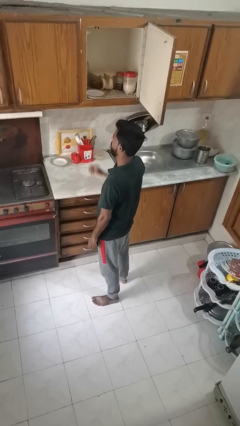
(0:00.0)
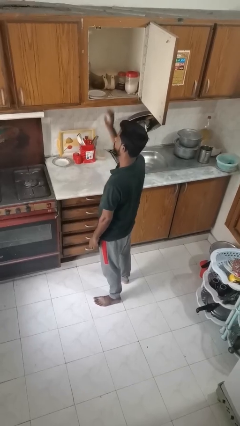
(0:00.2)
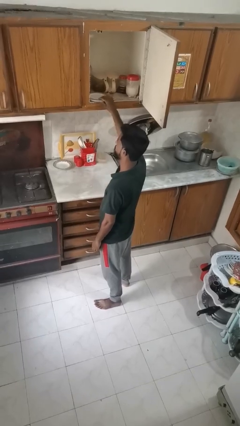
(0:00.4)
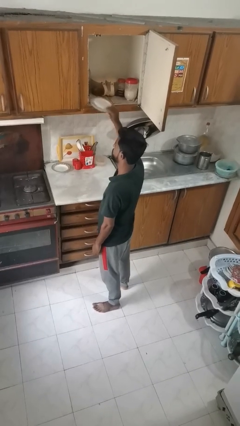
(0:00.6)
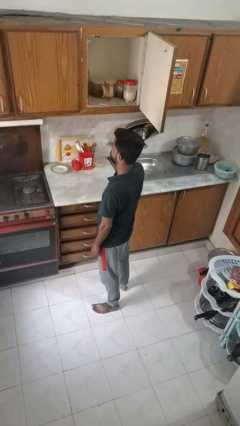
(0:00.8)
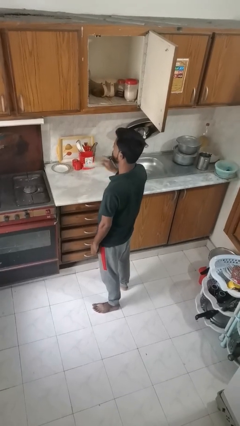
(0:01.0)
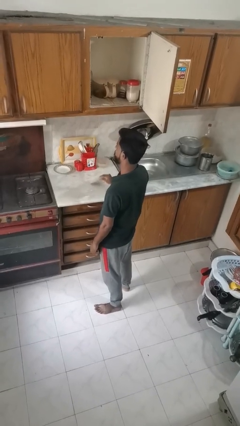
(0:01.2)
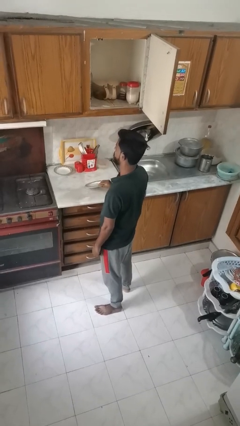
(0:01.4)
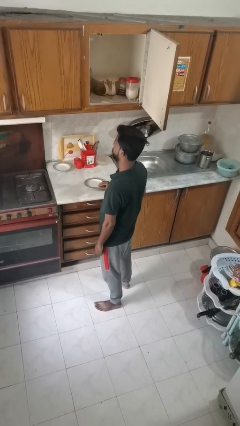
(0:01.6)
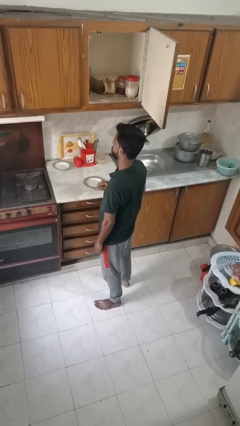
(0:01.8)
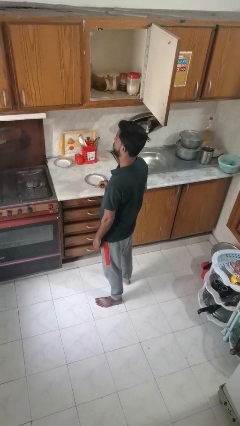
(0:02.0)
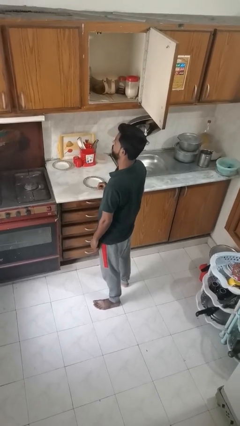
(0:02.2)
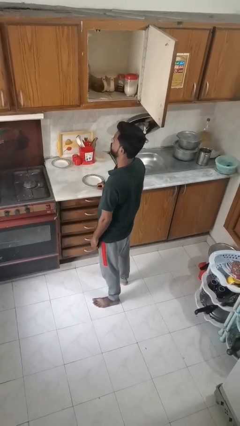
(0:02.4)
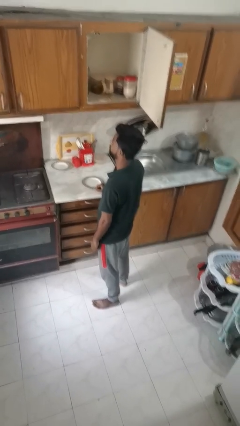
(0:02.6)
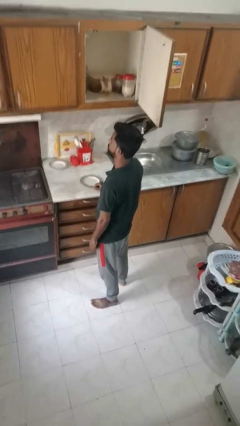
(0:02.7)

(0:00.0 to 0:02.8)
person takes object from cabinet

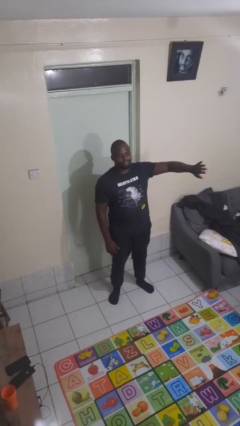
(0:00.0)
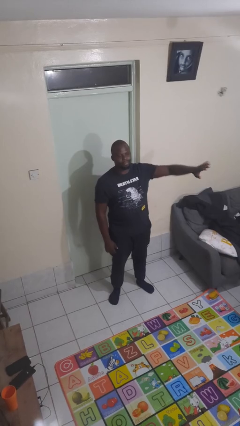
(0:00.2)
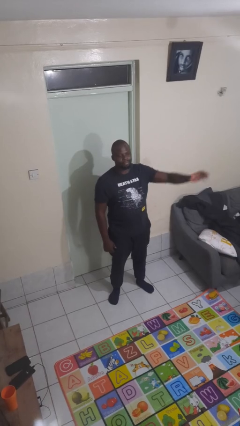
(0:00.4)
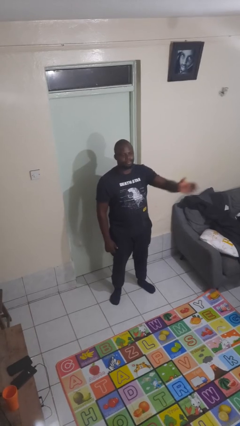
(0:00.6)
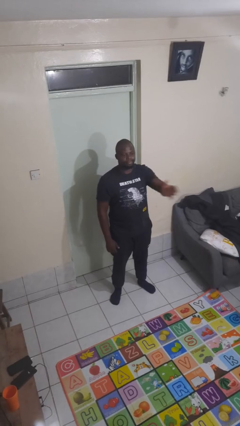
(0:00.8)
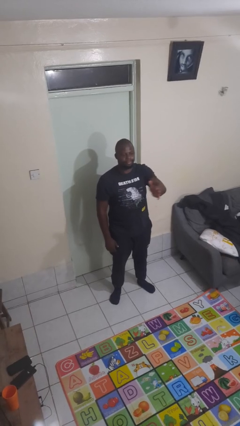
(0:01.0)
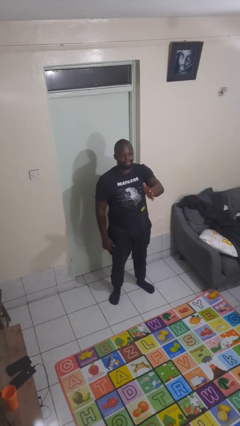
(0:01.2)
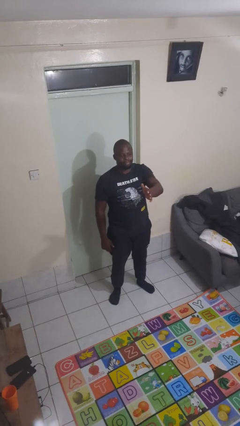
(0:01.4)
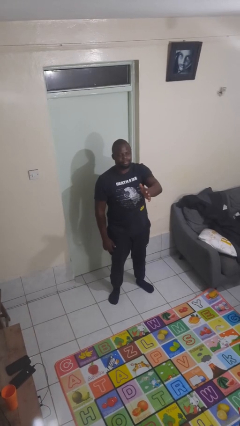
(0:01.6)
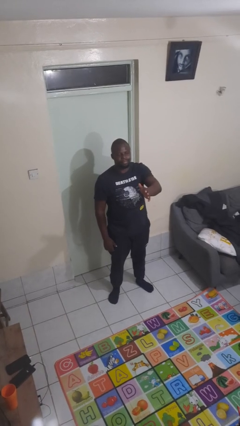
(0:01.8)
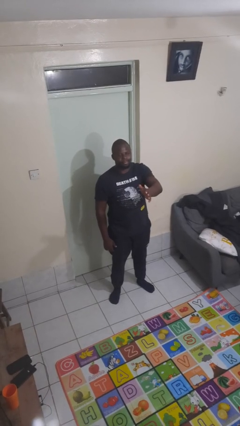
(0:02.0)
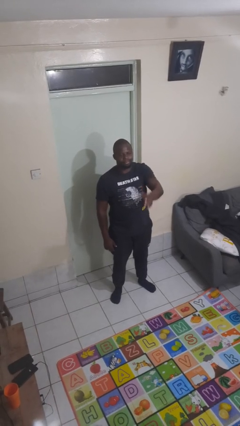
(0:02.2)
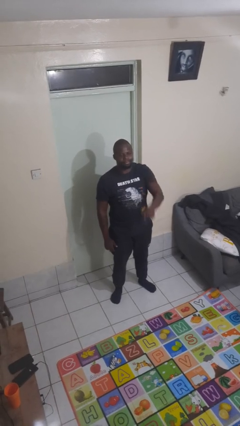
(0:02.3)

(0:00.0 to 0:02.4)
person gestures swipe right

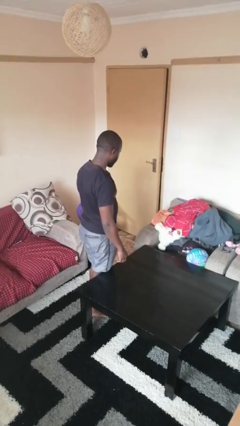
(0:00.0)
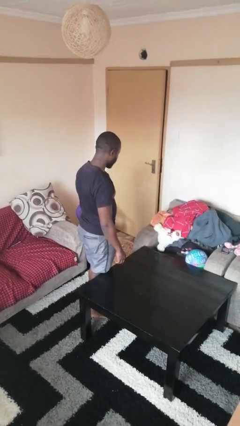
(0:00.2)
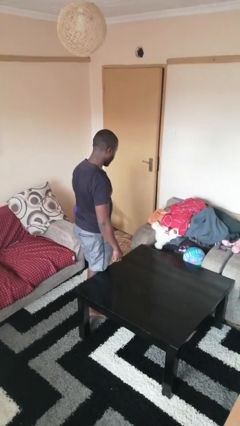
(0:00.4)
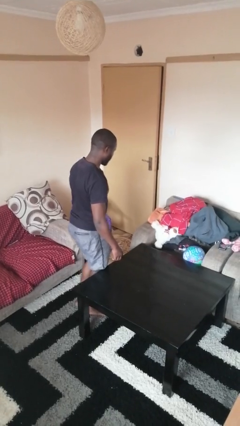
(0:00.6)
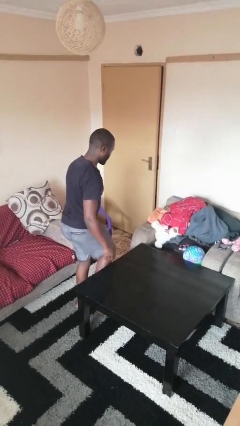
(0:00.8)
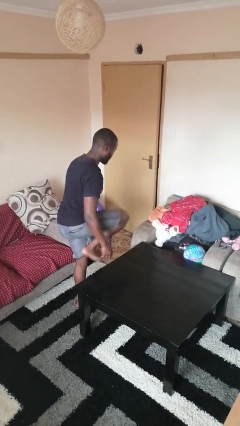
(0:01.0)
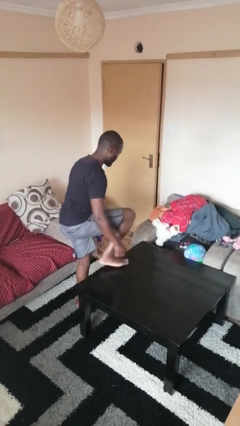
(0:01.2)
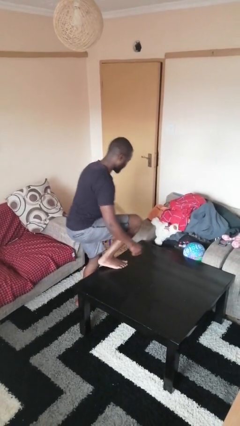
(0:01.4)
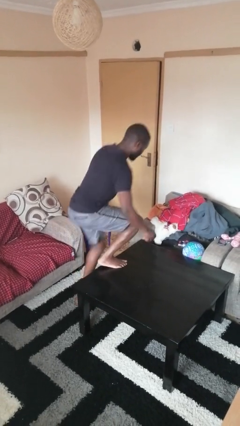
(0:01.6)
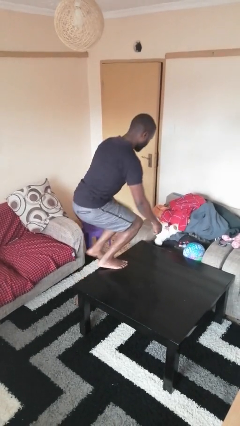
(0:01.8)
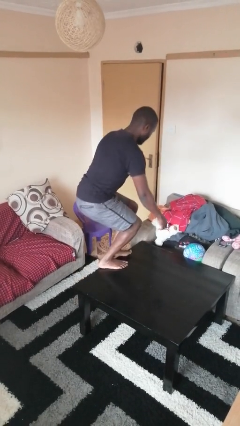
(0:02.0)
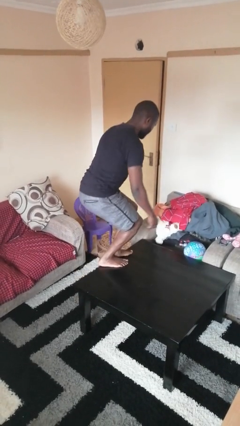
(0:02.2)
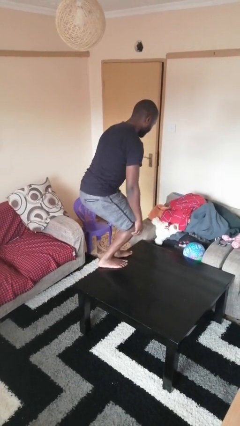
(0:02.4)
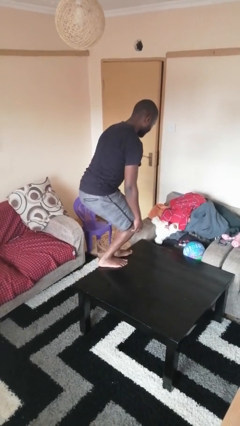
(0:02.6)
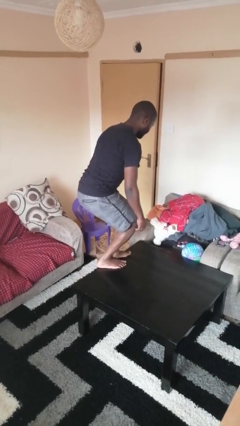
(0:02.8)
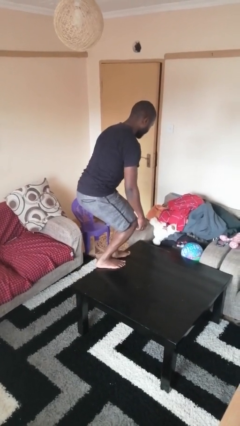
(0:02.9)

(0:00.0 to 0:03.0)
person climbs on table

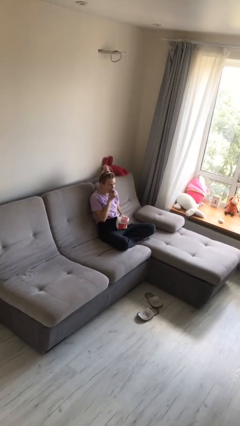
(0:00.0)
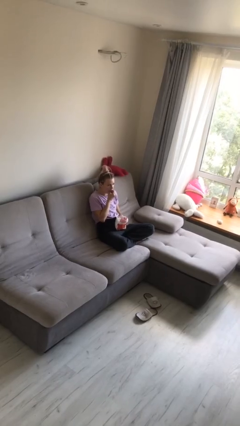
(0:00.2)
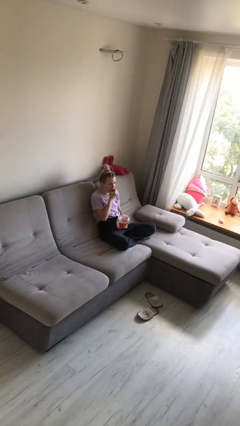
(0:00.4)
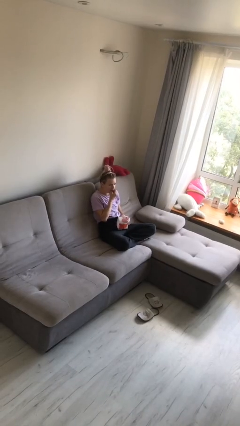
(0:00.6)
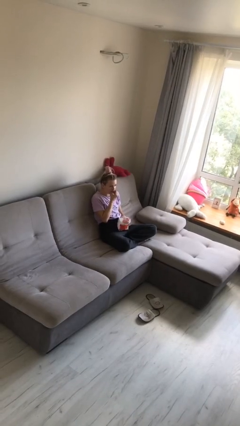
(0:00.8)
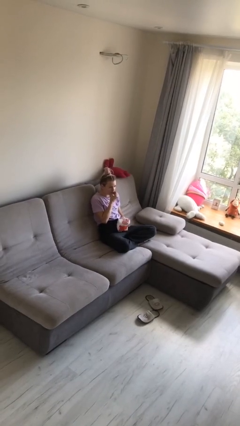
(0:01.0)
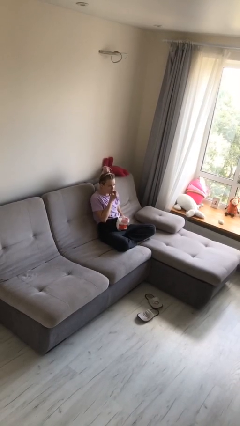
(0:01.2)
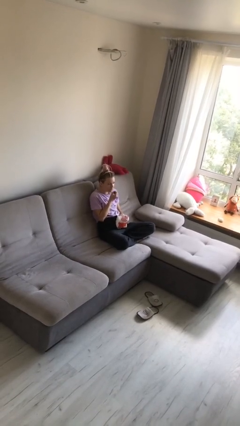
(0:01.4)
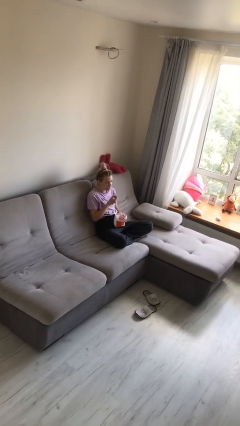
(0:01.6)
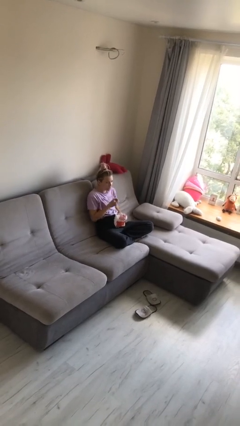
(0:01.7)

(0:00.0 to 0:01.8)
person eats snack from bag

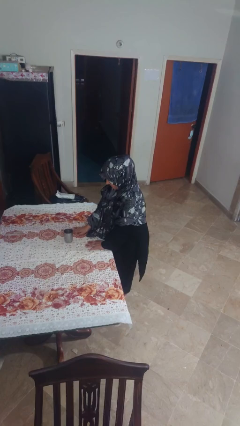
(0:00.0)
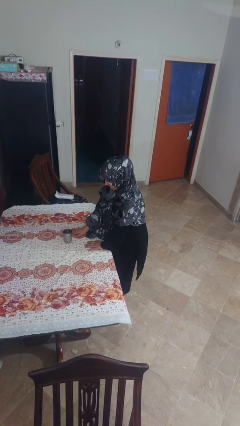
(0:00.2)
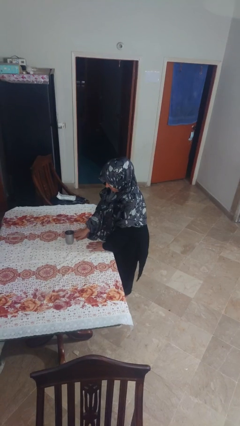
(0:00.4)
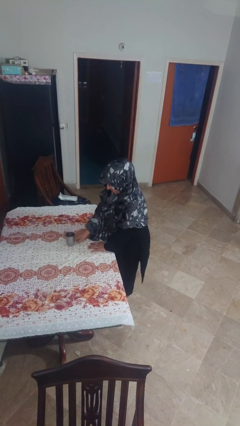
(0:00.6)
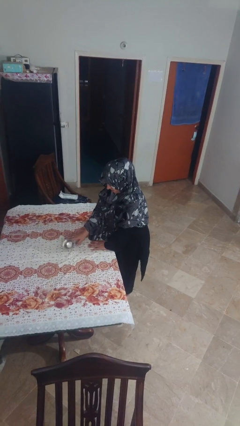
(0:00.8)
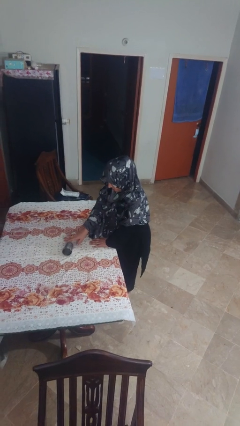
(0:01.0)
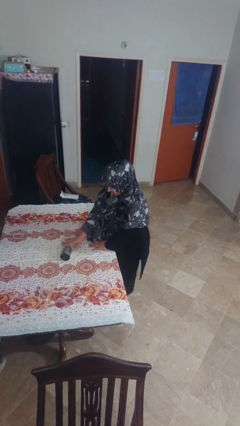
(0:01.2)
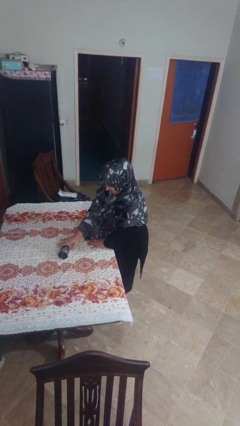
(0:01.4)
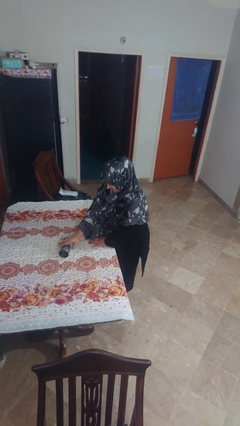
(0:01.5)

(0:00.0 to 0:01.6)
person knocks over glass

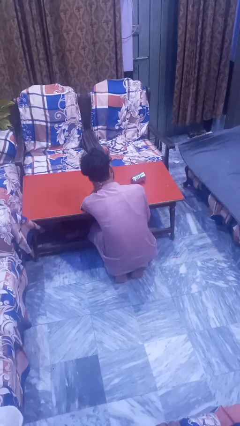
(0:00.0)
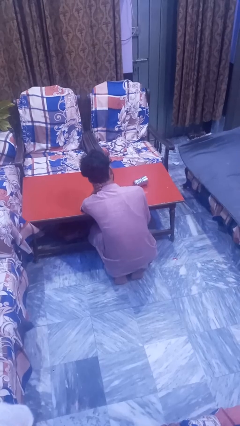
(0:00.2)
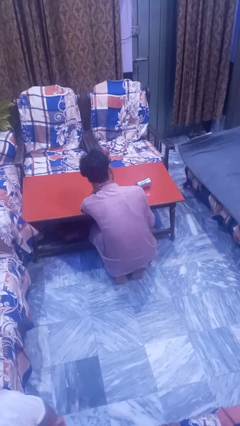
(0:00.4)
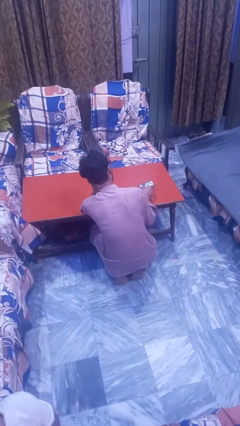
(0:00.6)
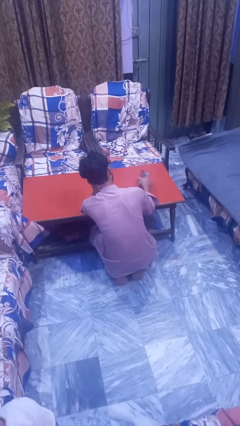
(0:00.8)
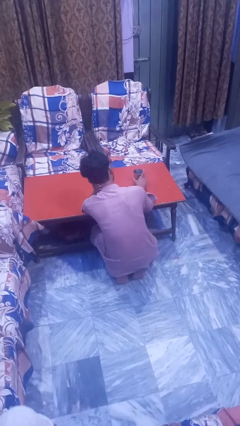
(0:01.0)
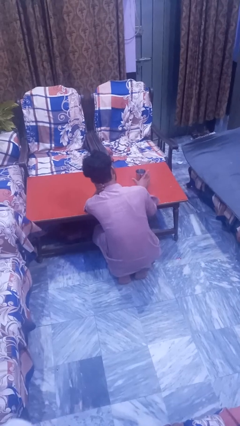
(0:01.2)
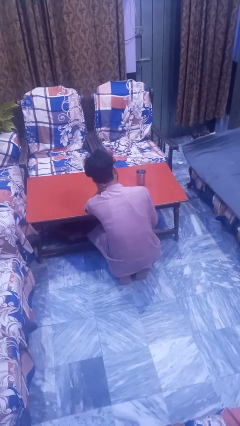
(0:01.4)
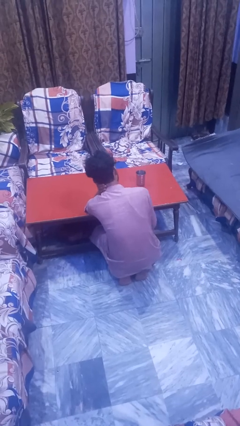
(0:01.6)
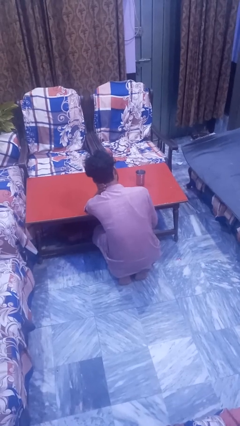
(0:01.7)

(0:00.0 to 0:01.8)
person sets upright glass

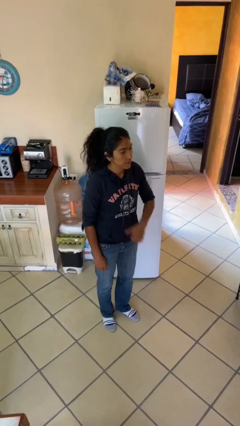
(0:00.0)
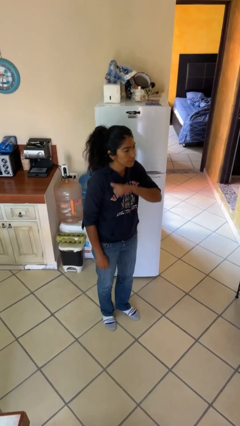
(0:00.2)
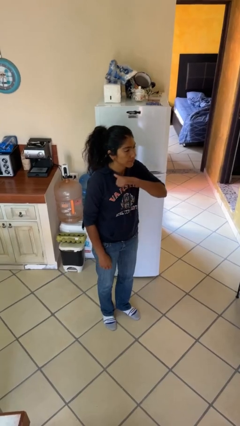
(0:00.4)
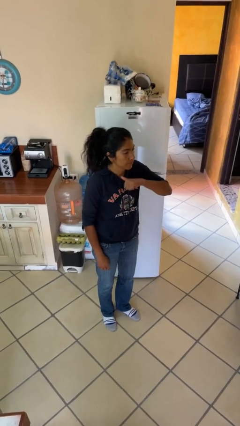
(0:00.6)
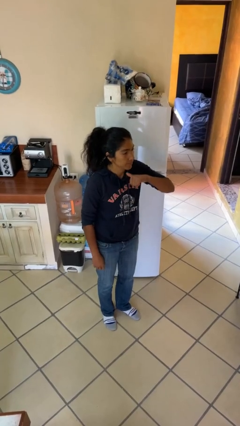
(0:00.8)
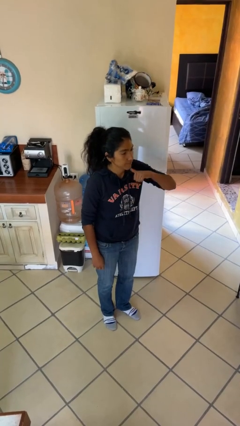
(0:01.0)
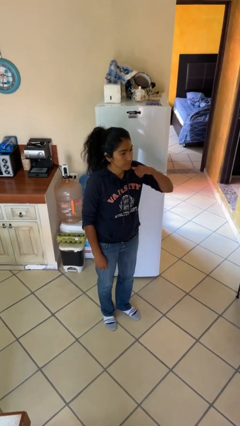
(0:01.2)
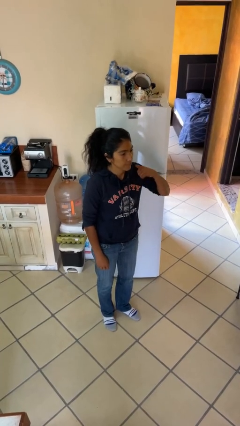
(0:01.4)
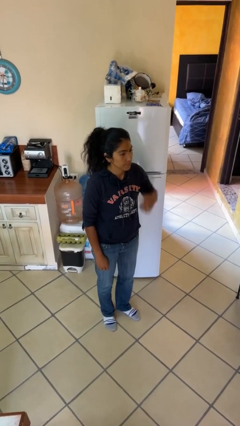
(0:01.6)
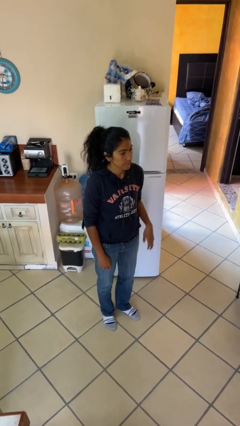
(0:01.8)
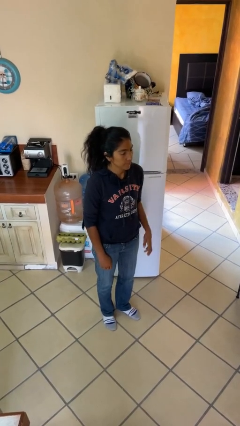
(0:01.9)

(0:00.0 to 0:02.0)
person gestures cut

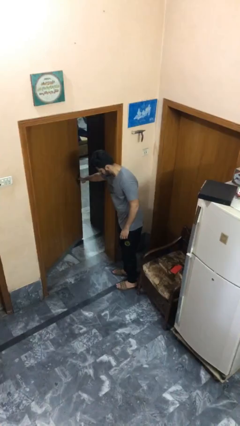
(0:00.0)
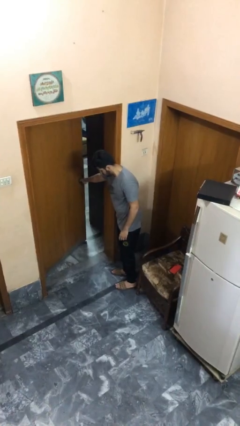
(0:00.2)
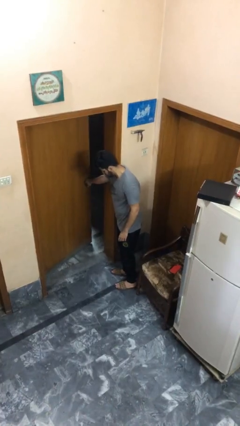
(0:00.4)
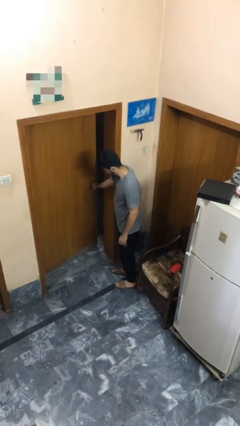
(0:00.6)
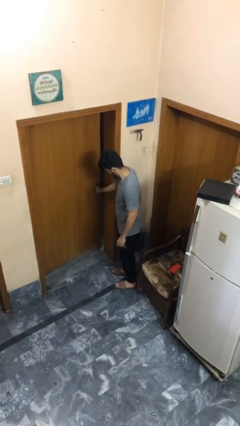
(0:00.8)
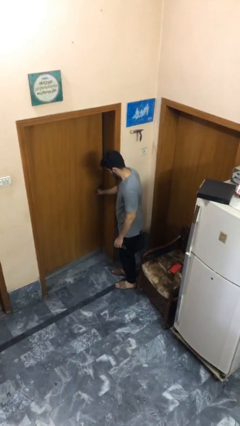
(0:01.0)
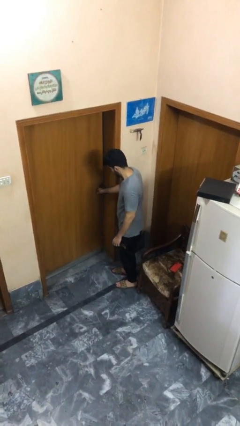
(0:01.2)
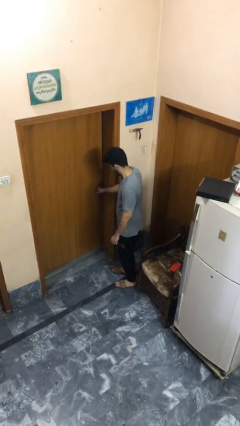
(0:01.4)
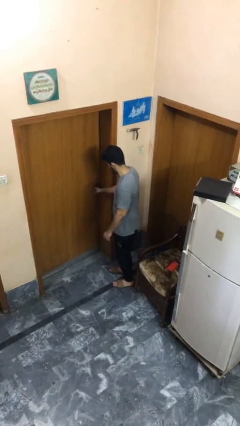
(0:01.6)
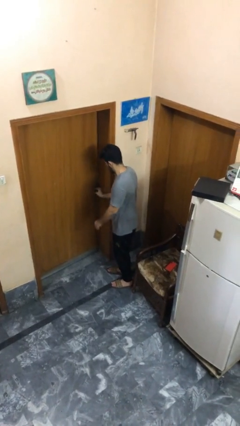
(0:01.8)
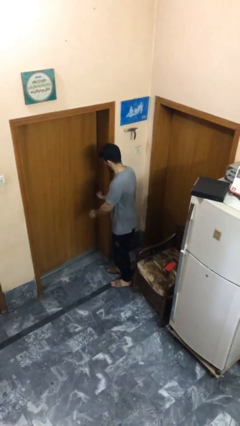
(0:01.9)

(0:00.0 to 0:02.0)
person closes facility door
